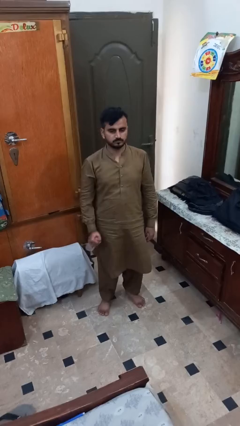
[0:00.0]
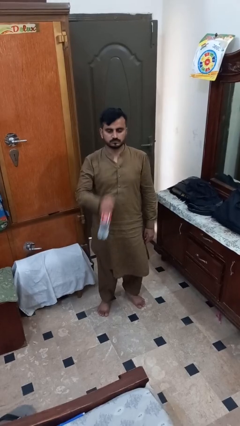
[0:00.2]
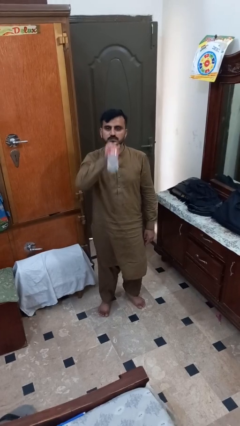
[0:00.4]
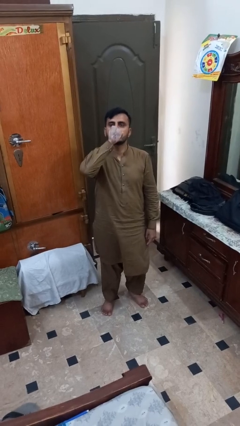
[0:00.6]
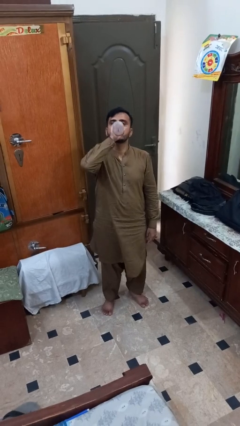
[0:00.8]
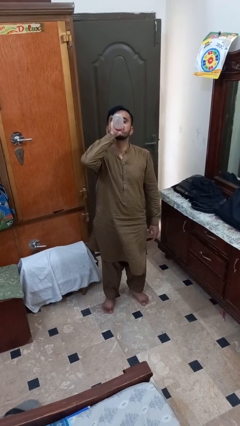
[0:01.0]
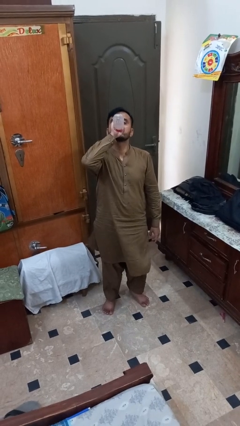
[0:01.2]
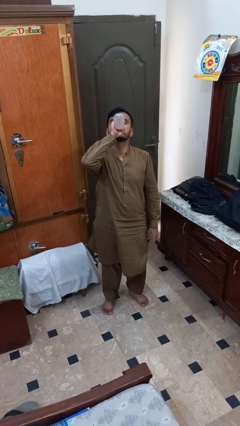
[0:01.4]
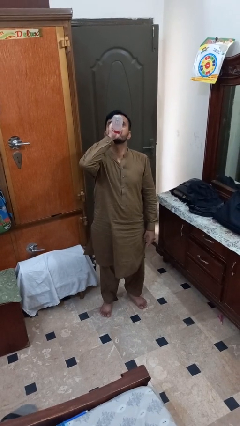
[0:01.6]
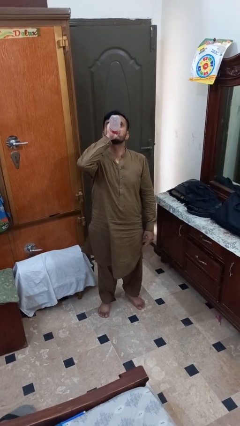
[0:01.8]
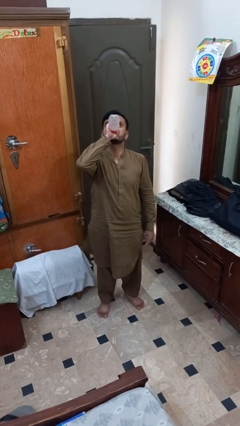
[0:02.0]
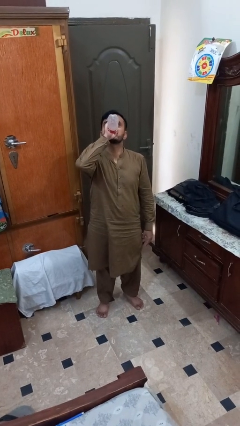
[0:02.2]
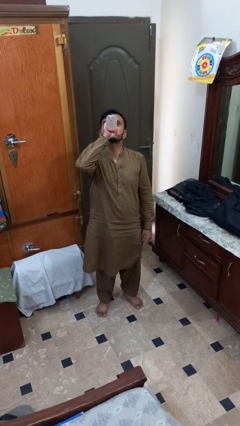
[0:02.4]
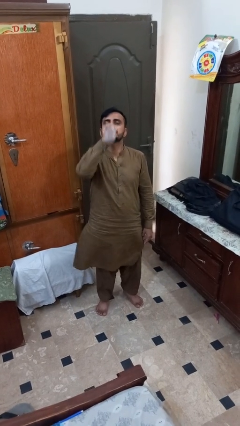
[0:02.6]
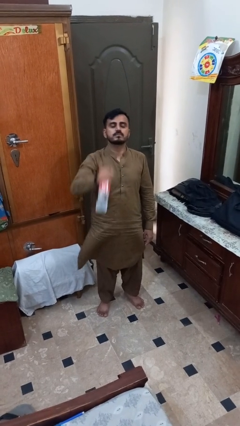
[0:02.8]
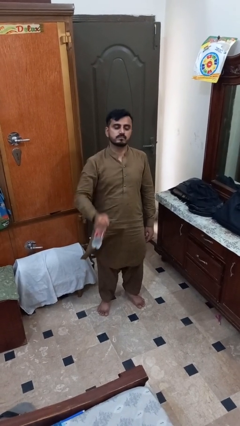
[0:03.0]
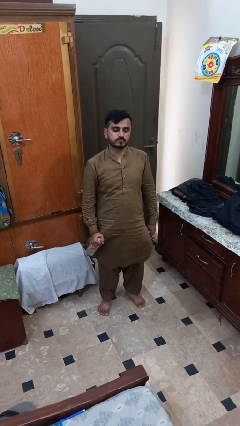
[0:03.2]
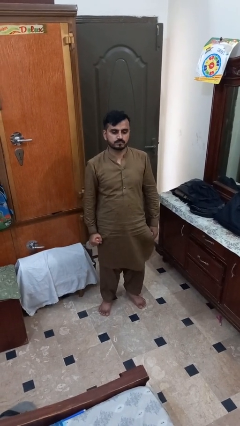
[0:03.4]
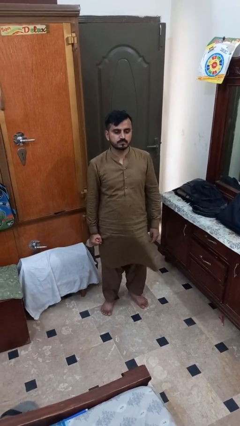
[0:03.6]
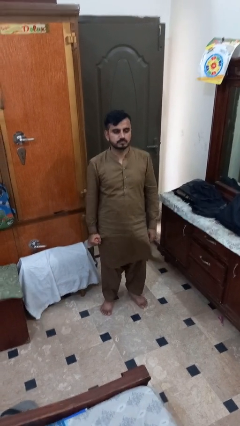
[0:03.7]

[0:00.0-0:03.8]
person drinks from bottle

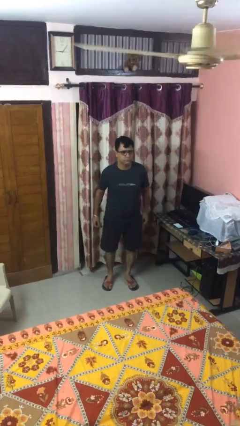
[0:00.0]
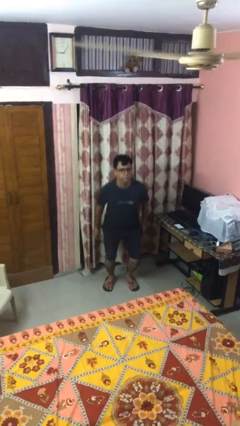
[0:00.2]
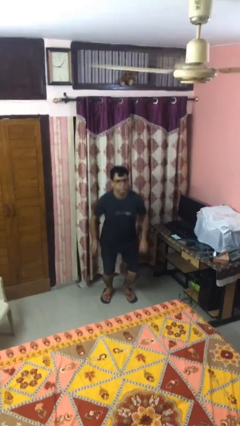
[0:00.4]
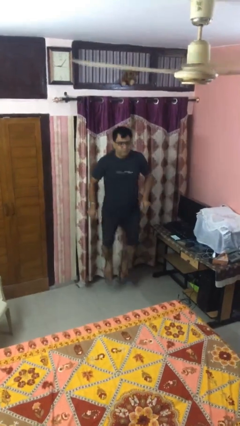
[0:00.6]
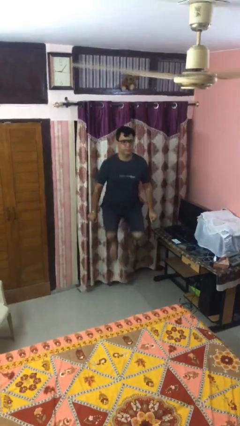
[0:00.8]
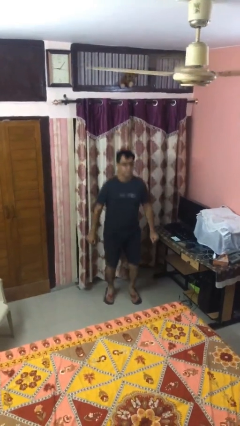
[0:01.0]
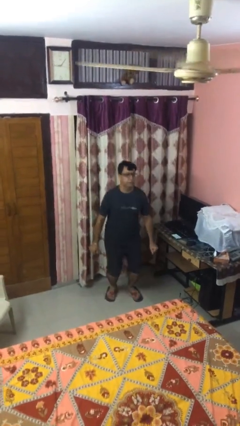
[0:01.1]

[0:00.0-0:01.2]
person jumps

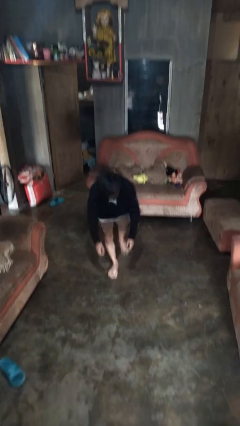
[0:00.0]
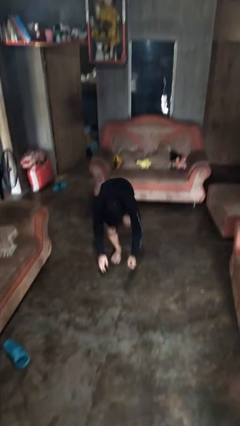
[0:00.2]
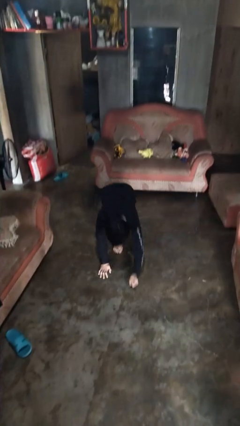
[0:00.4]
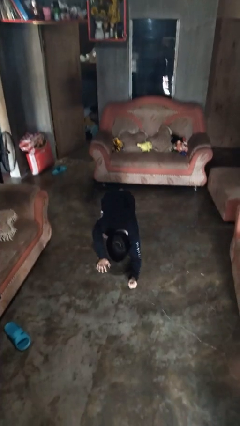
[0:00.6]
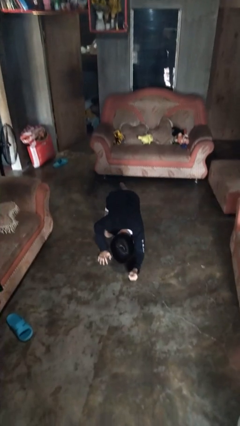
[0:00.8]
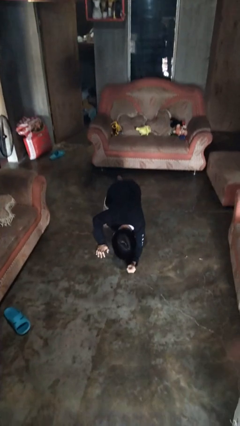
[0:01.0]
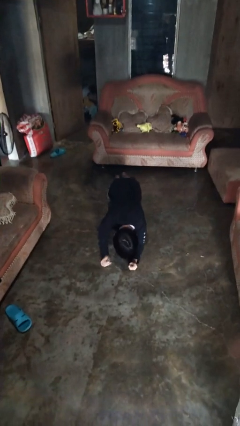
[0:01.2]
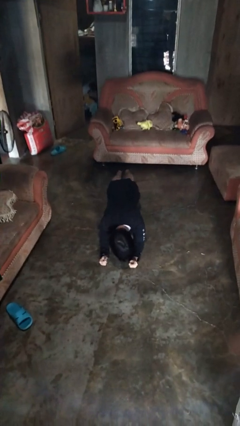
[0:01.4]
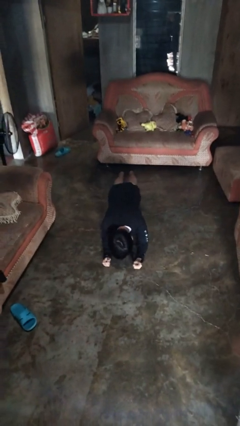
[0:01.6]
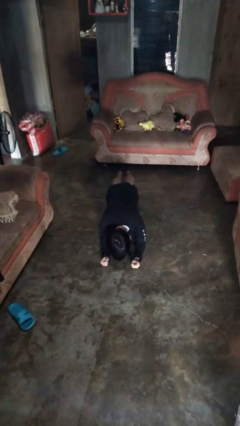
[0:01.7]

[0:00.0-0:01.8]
person exercises with plank

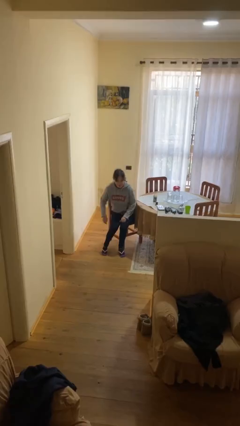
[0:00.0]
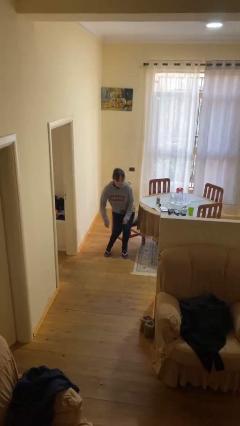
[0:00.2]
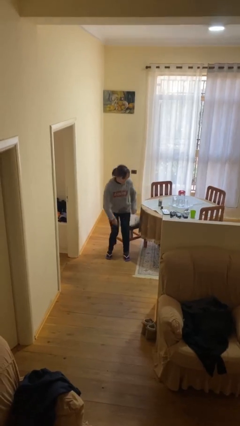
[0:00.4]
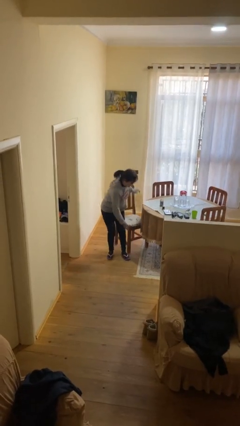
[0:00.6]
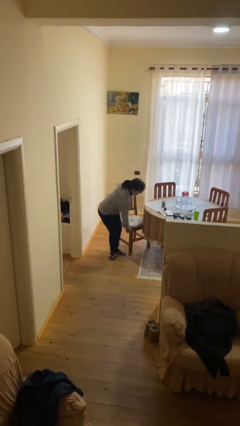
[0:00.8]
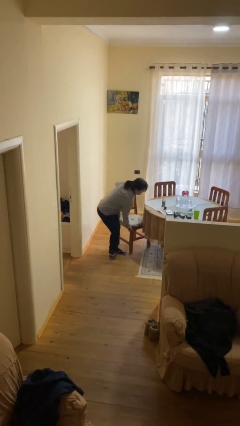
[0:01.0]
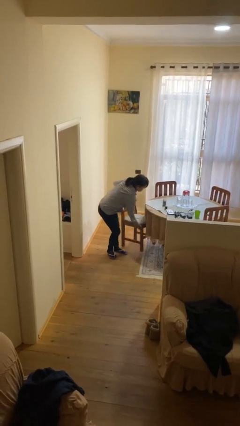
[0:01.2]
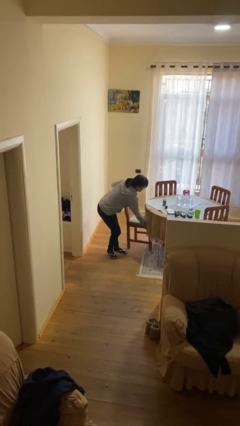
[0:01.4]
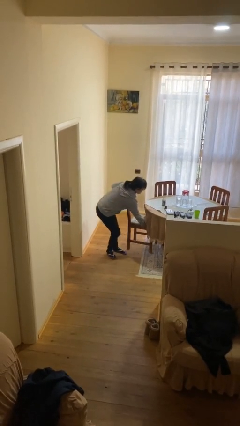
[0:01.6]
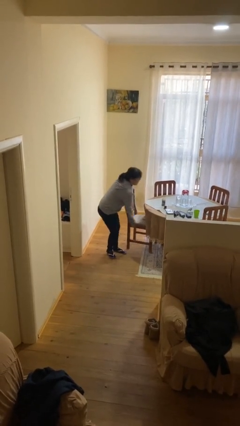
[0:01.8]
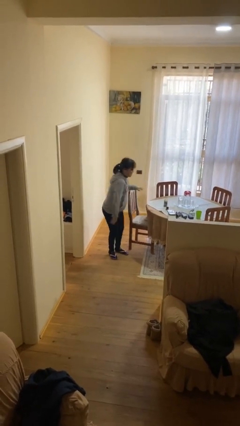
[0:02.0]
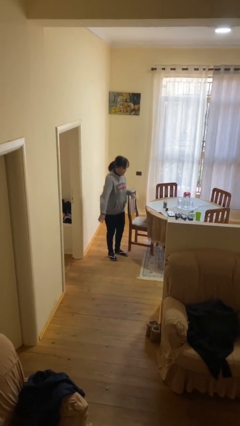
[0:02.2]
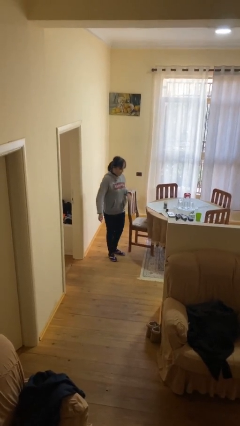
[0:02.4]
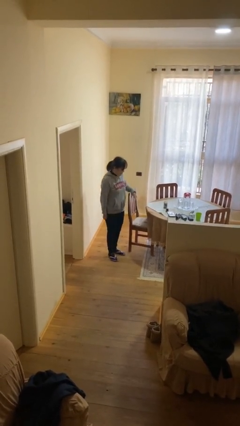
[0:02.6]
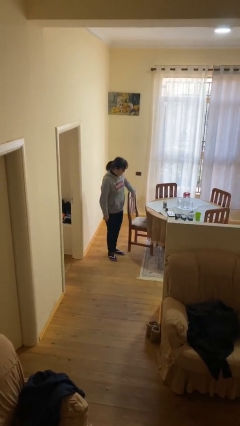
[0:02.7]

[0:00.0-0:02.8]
person stands up

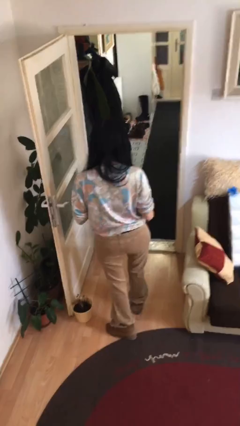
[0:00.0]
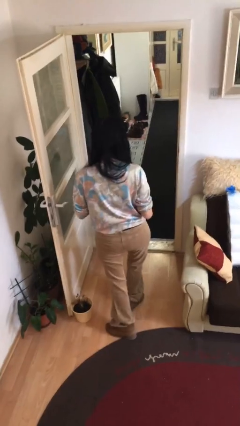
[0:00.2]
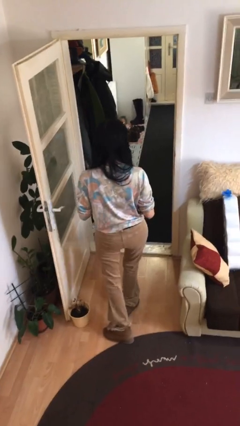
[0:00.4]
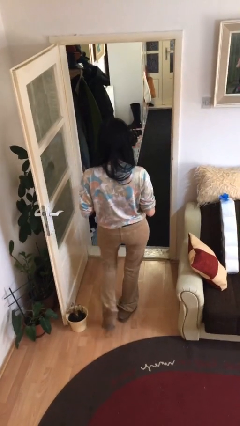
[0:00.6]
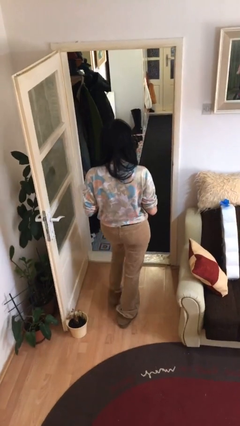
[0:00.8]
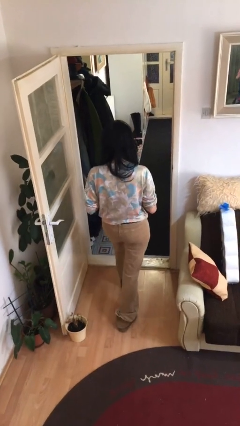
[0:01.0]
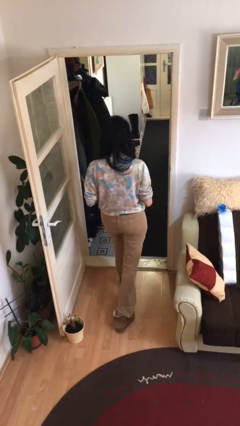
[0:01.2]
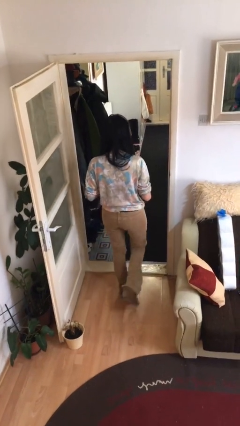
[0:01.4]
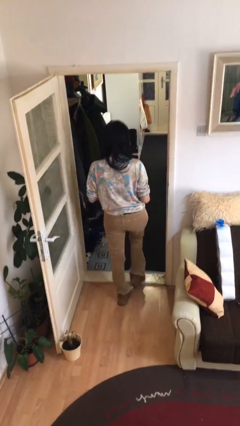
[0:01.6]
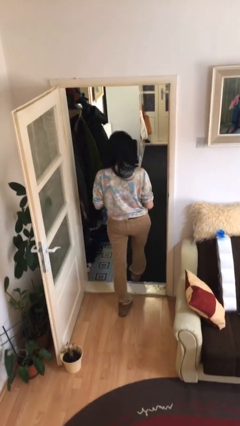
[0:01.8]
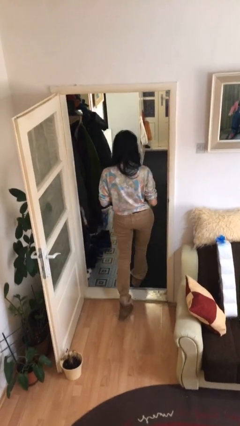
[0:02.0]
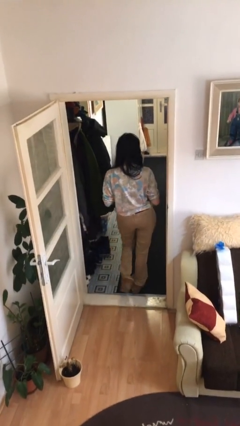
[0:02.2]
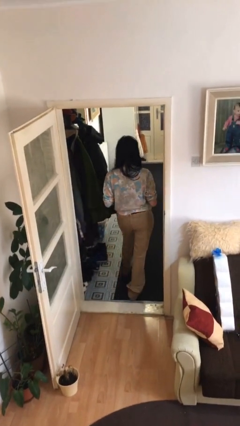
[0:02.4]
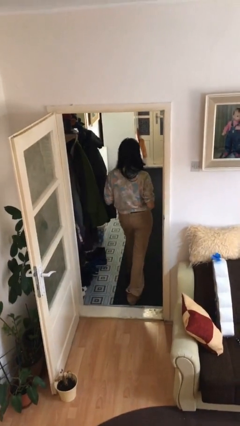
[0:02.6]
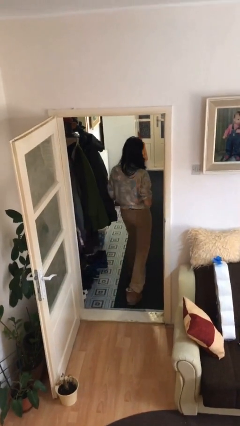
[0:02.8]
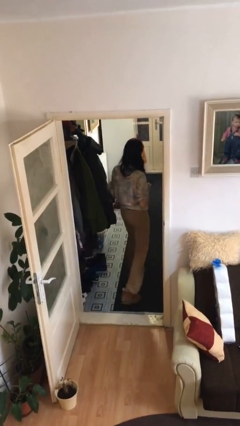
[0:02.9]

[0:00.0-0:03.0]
person exits scene through structure

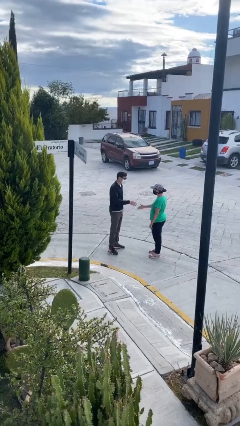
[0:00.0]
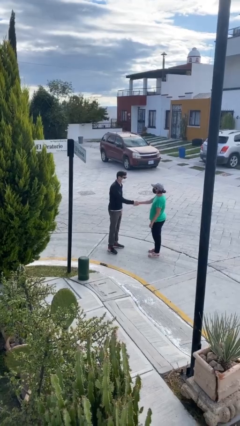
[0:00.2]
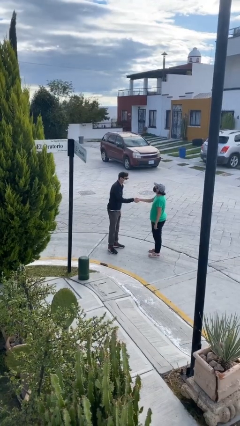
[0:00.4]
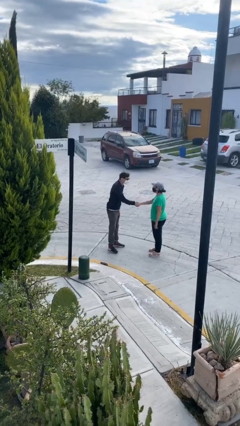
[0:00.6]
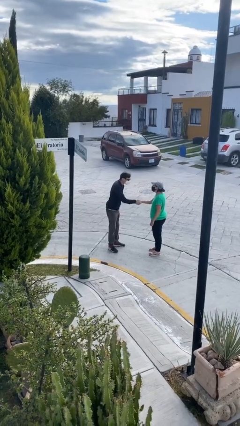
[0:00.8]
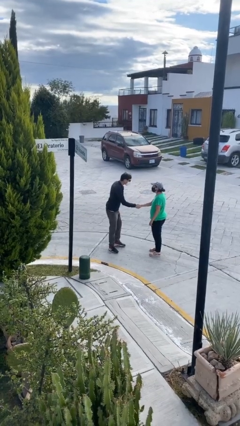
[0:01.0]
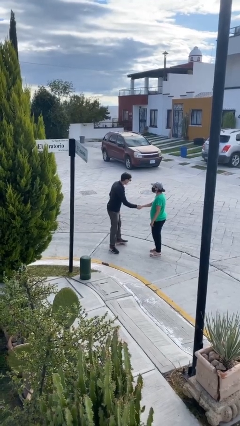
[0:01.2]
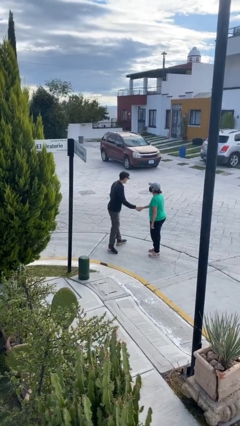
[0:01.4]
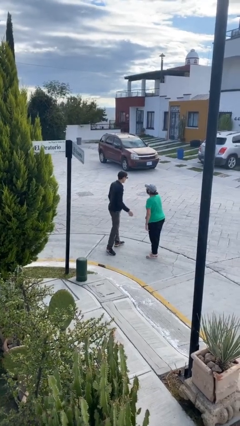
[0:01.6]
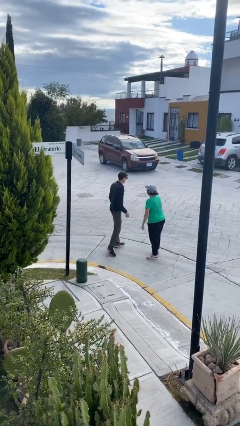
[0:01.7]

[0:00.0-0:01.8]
person shakes hand

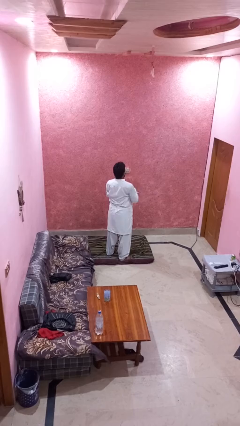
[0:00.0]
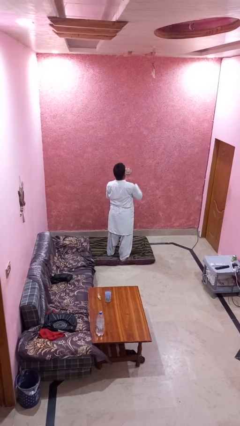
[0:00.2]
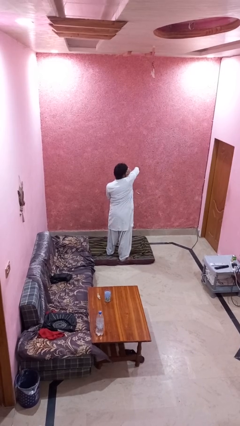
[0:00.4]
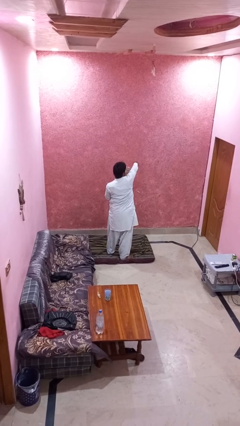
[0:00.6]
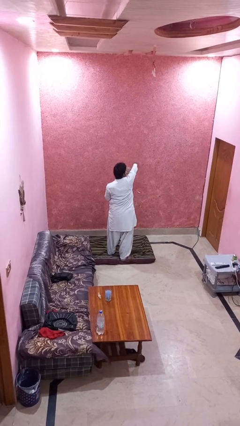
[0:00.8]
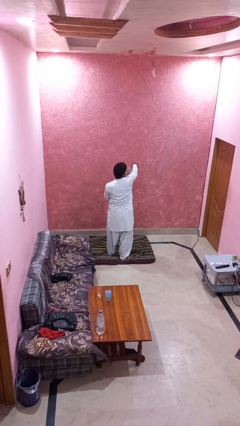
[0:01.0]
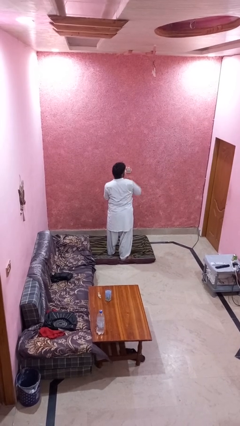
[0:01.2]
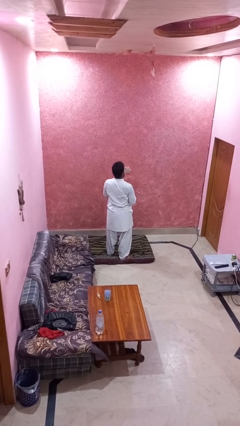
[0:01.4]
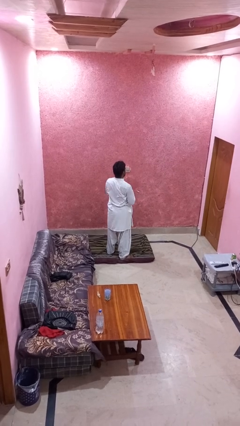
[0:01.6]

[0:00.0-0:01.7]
person punches

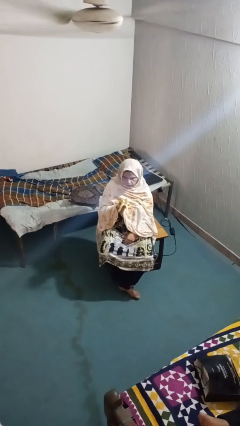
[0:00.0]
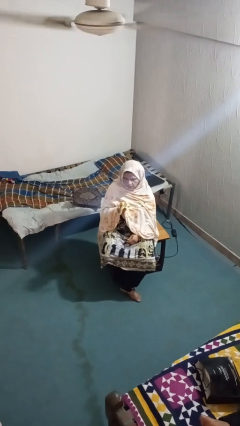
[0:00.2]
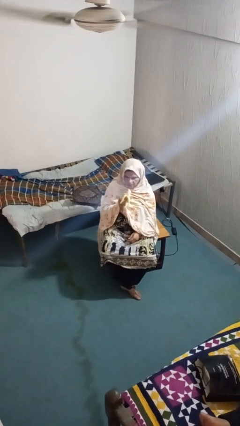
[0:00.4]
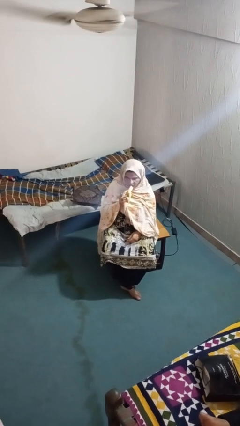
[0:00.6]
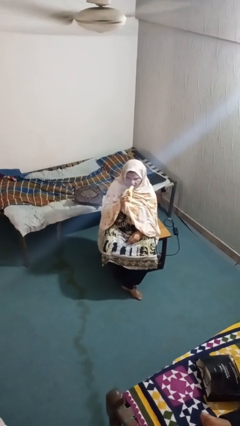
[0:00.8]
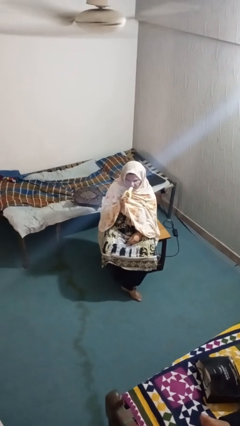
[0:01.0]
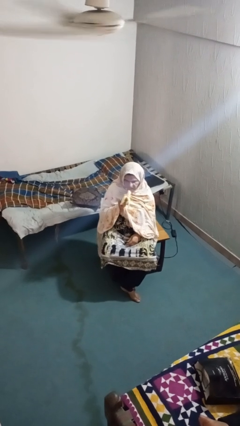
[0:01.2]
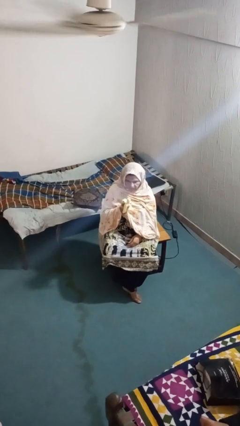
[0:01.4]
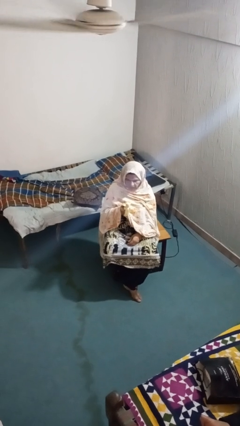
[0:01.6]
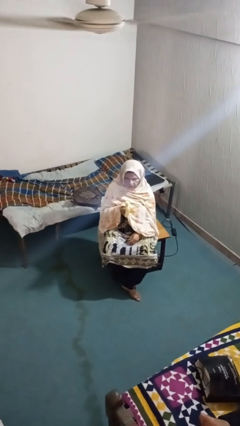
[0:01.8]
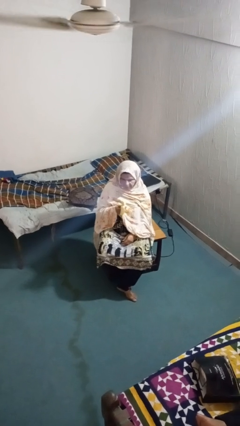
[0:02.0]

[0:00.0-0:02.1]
person eats banana
